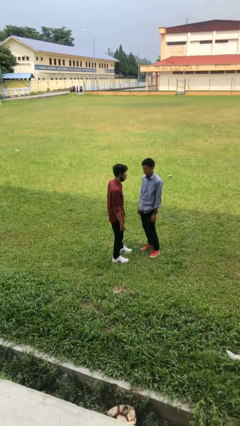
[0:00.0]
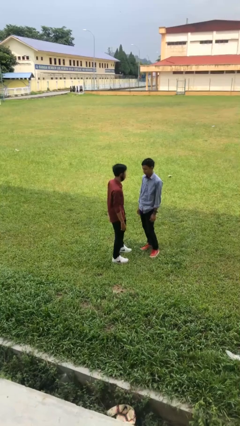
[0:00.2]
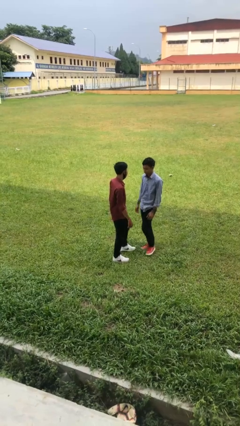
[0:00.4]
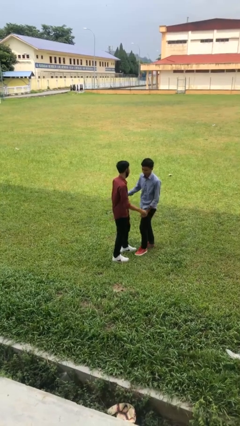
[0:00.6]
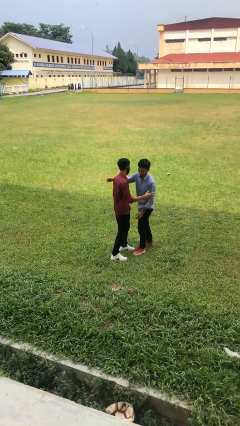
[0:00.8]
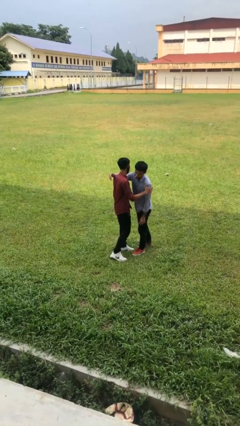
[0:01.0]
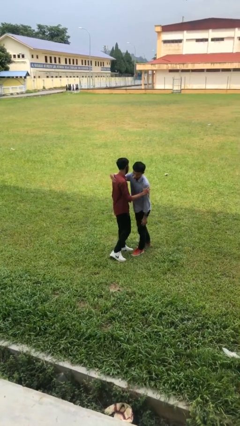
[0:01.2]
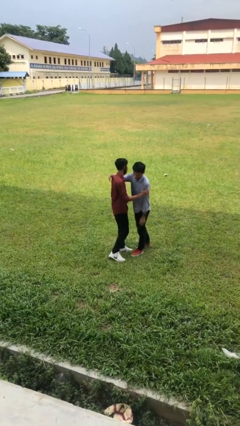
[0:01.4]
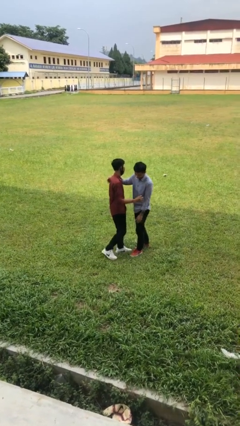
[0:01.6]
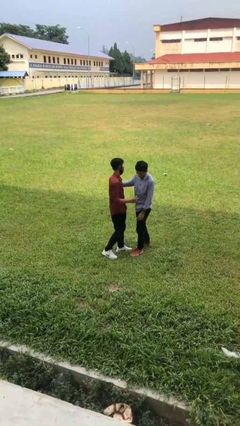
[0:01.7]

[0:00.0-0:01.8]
person embraces person

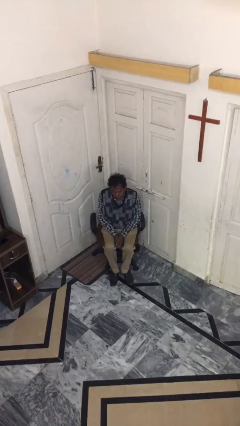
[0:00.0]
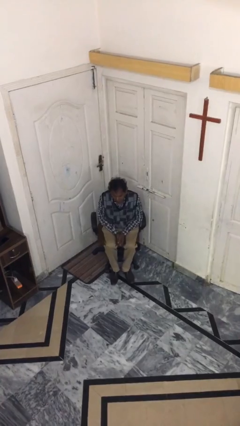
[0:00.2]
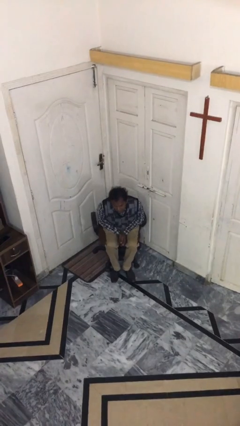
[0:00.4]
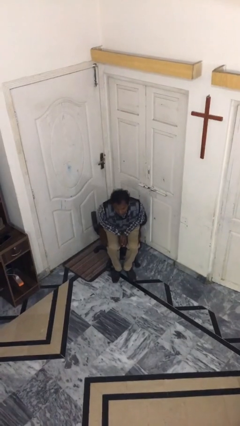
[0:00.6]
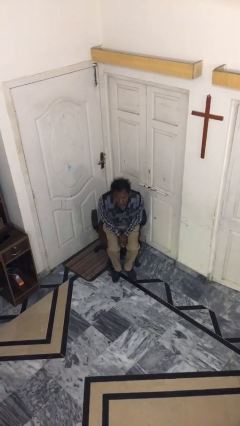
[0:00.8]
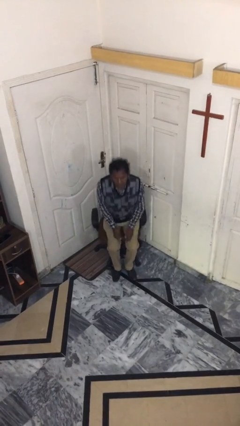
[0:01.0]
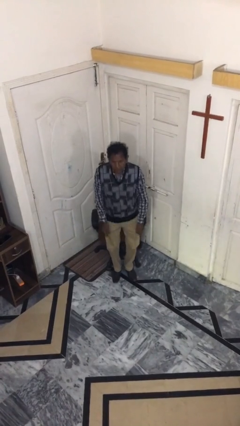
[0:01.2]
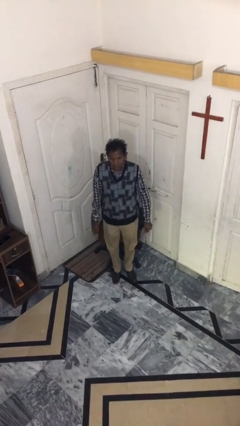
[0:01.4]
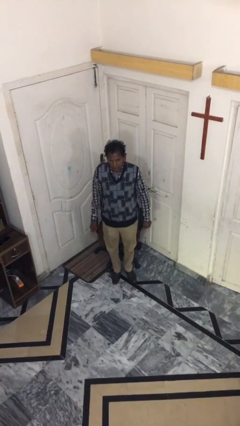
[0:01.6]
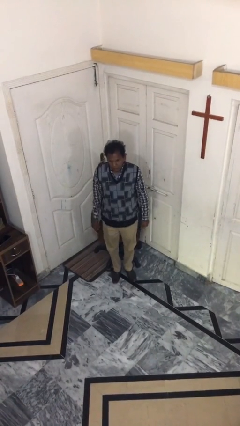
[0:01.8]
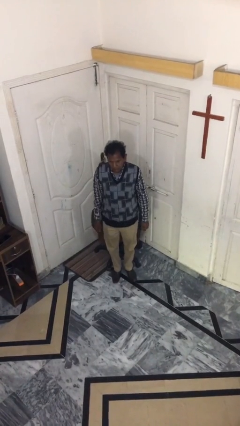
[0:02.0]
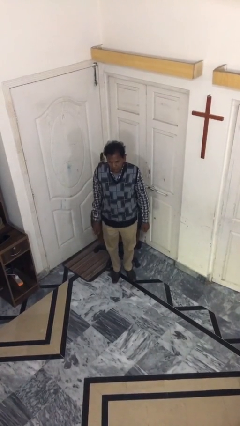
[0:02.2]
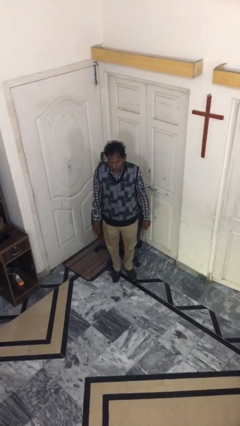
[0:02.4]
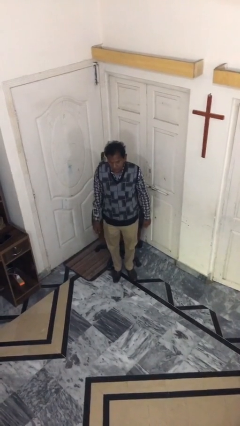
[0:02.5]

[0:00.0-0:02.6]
person stands up

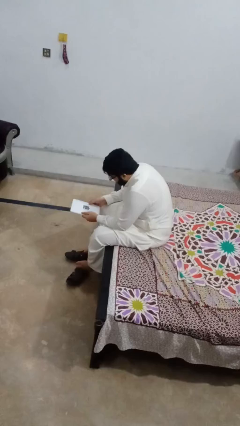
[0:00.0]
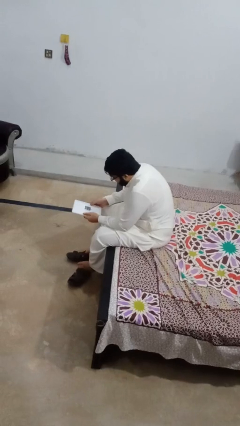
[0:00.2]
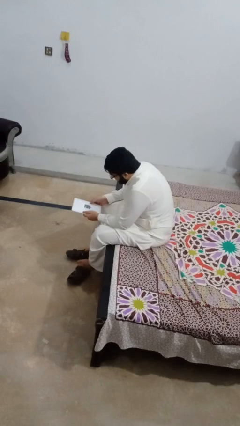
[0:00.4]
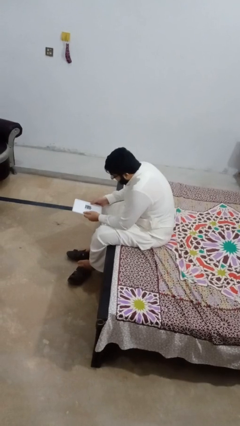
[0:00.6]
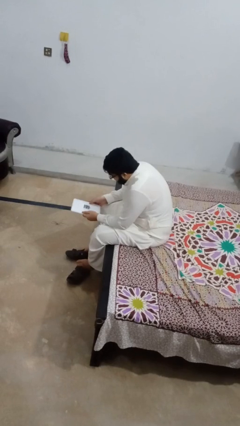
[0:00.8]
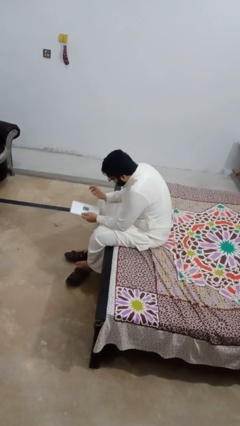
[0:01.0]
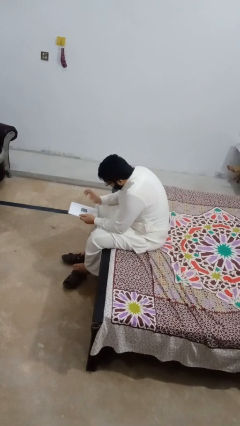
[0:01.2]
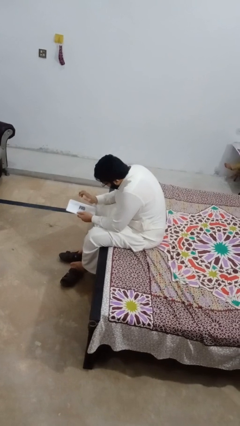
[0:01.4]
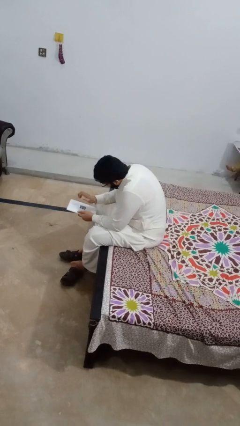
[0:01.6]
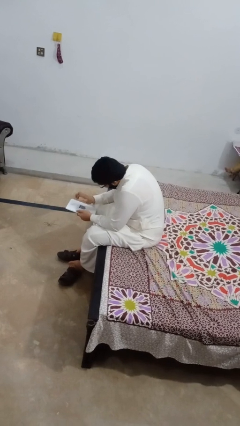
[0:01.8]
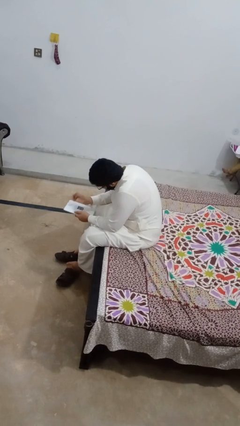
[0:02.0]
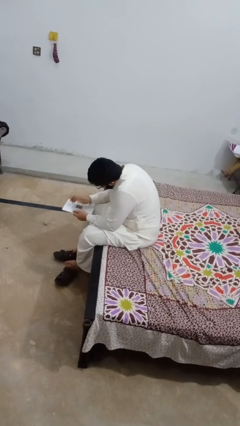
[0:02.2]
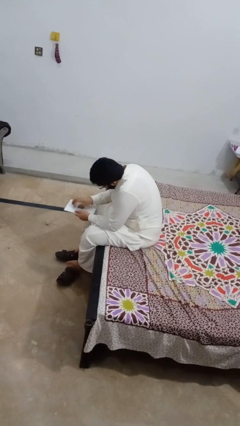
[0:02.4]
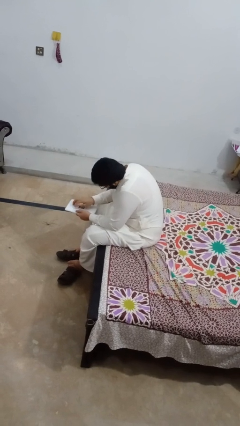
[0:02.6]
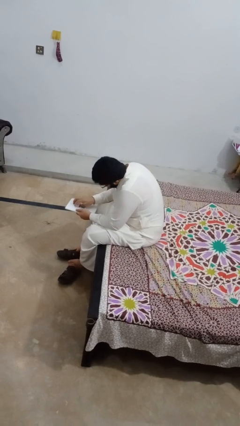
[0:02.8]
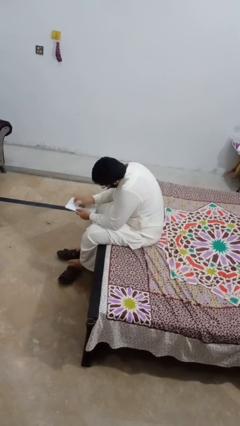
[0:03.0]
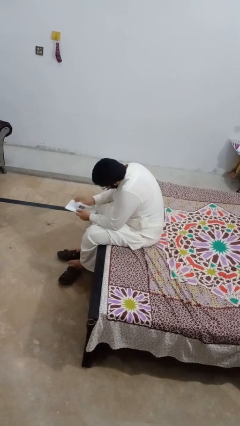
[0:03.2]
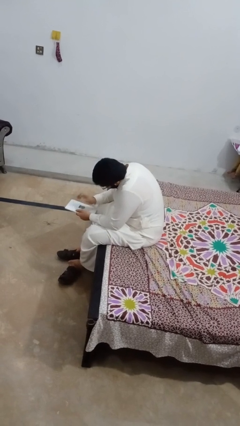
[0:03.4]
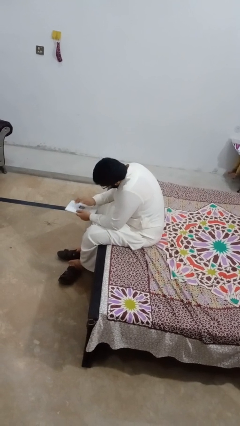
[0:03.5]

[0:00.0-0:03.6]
person taps object with finger

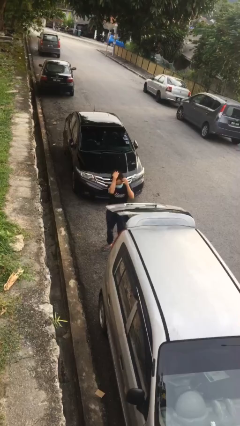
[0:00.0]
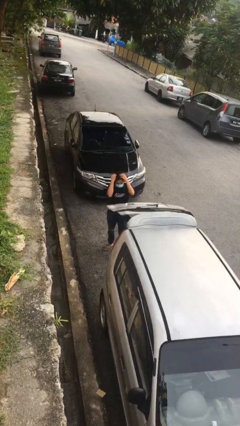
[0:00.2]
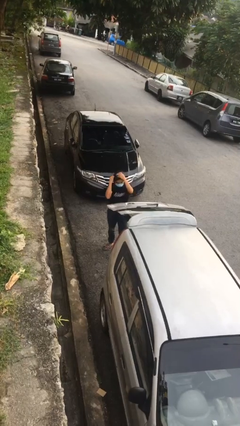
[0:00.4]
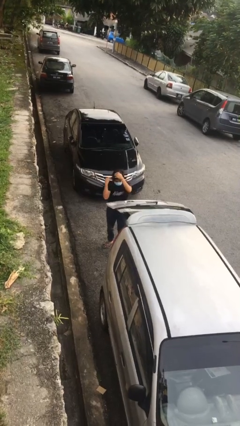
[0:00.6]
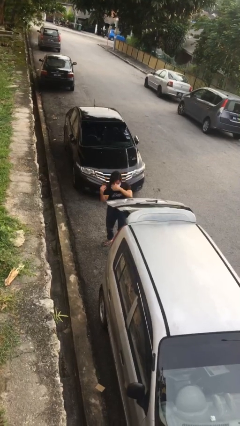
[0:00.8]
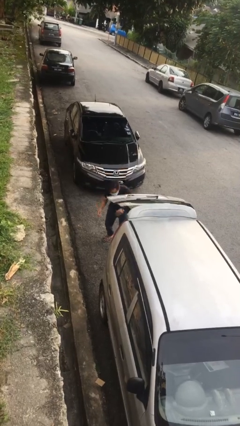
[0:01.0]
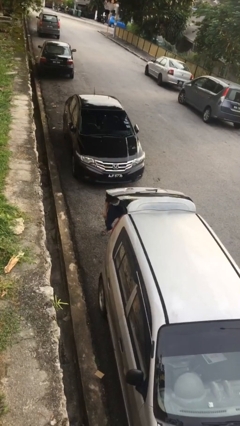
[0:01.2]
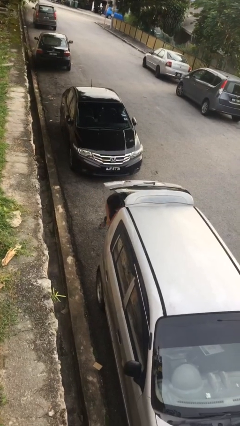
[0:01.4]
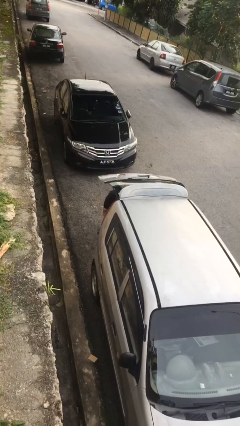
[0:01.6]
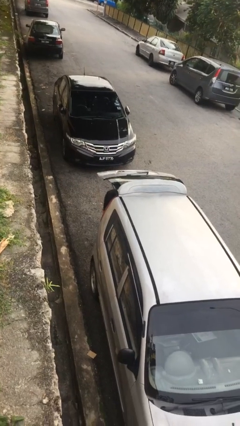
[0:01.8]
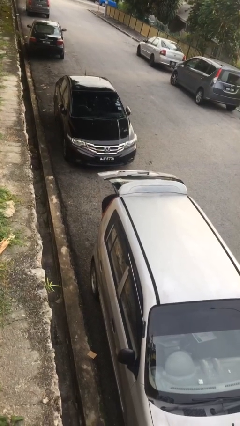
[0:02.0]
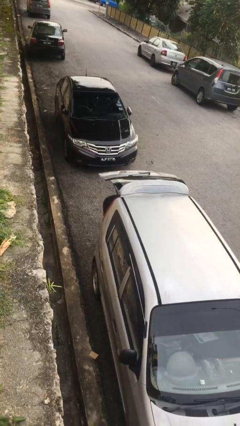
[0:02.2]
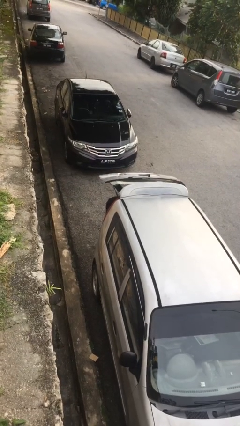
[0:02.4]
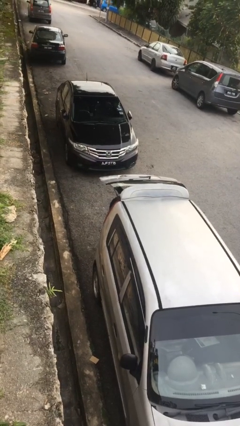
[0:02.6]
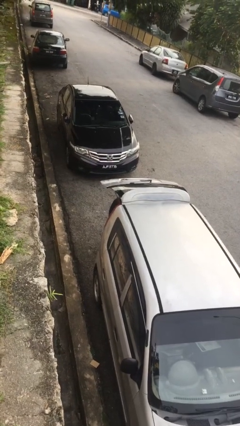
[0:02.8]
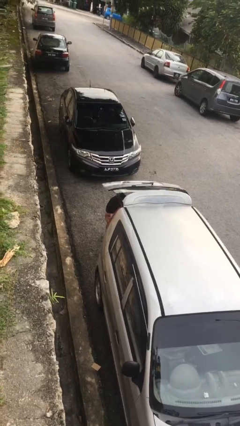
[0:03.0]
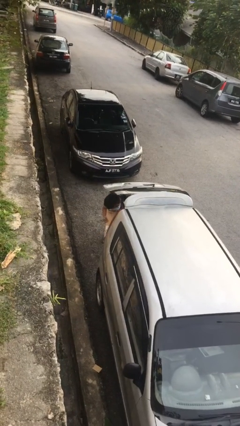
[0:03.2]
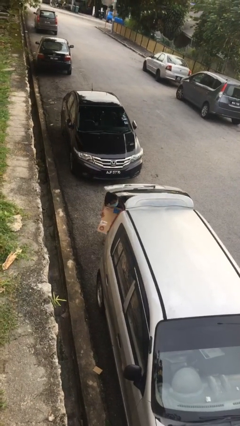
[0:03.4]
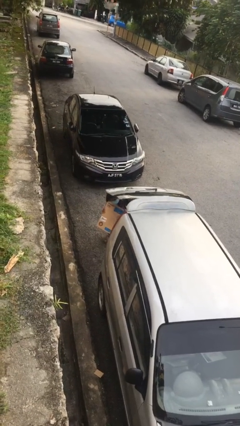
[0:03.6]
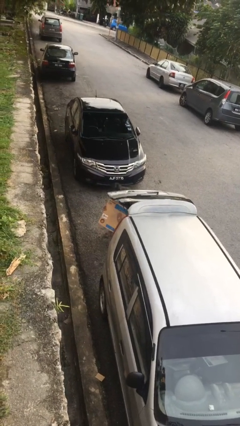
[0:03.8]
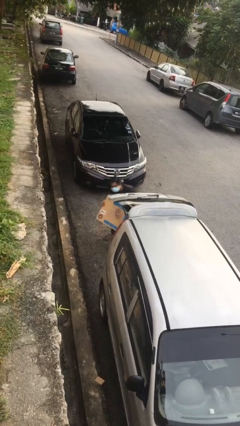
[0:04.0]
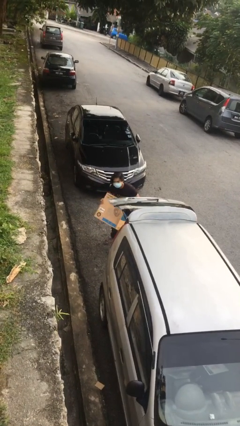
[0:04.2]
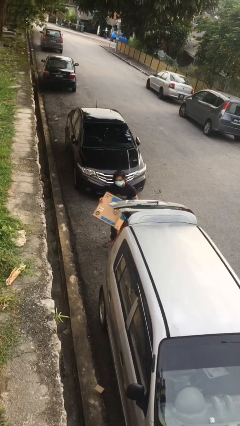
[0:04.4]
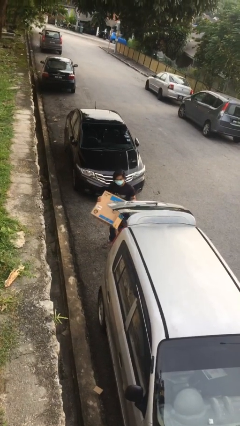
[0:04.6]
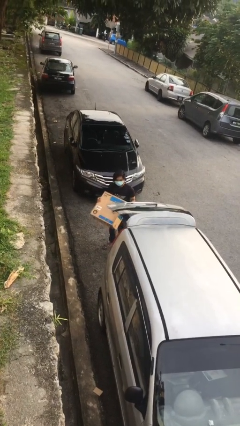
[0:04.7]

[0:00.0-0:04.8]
person unloads car

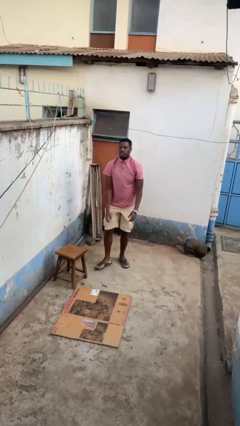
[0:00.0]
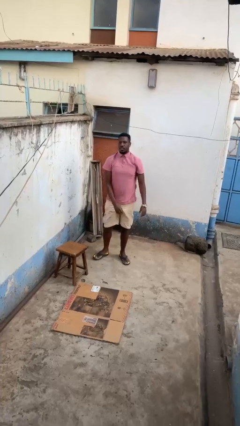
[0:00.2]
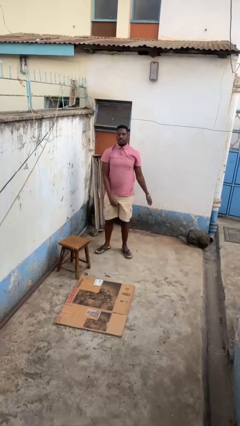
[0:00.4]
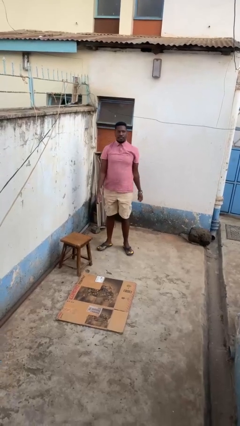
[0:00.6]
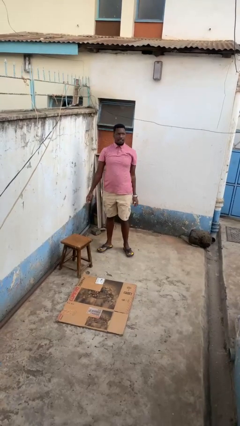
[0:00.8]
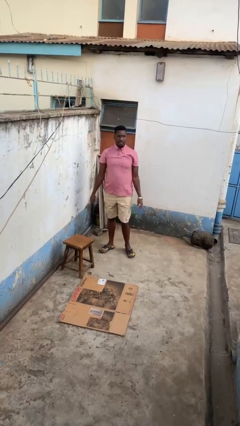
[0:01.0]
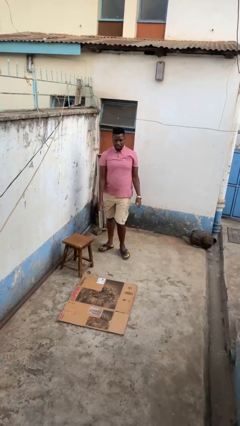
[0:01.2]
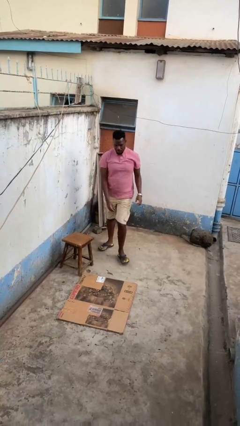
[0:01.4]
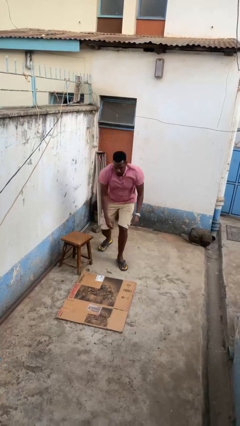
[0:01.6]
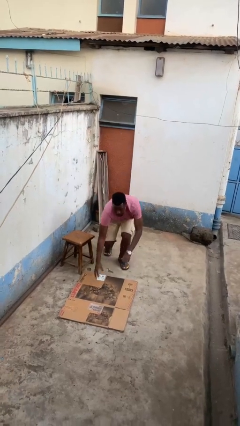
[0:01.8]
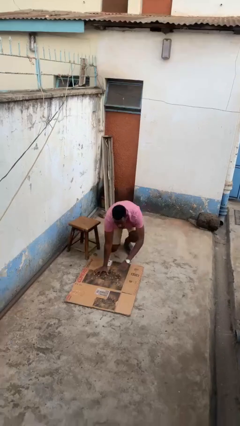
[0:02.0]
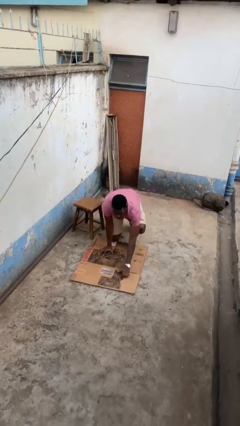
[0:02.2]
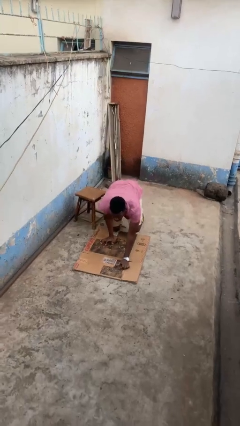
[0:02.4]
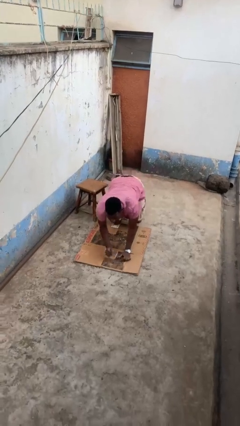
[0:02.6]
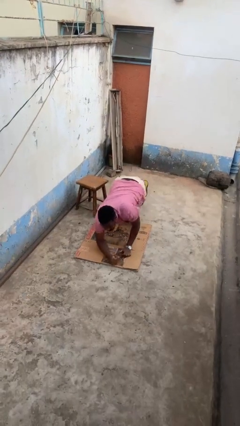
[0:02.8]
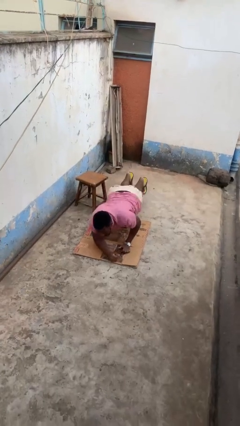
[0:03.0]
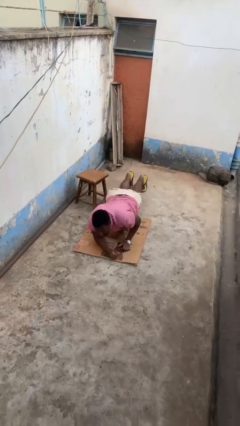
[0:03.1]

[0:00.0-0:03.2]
person trips on object on floor

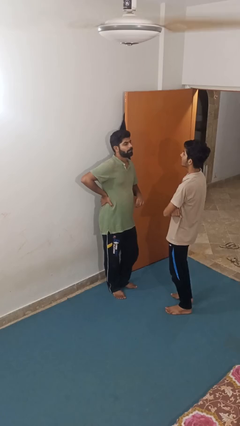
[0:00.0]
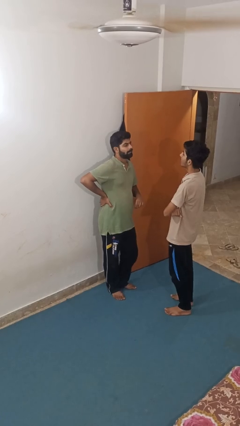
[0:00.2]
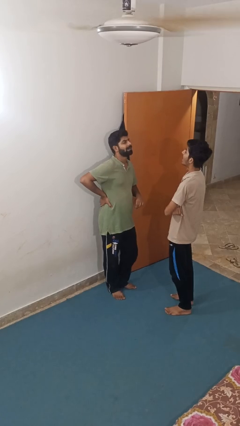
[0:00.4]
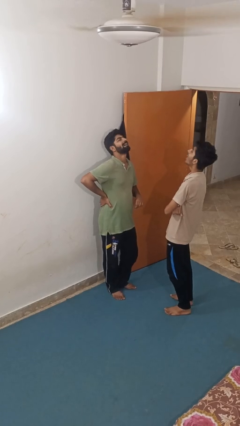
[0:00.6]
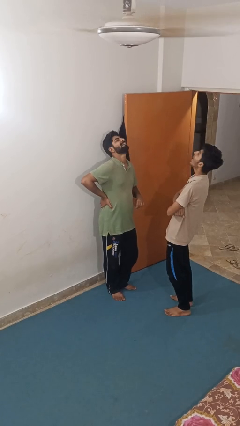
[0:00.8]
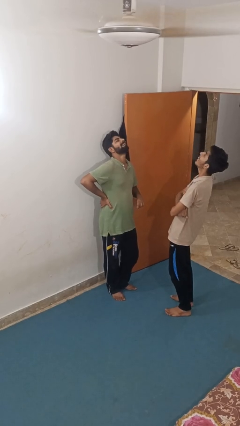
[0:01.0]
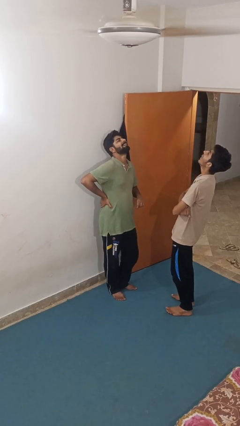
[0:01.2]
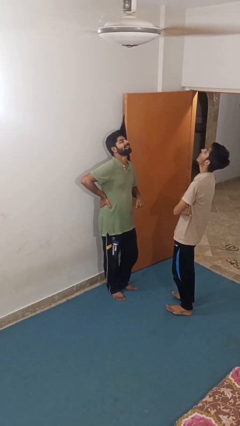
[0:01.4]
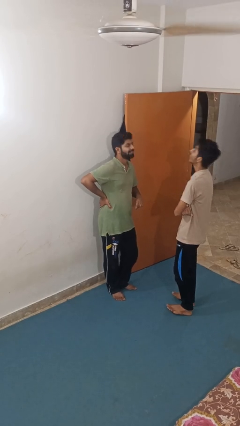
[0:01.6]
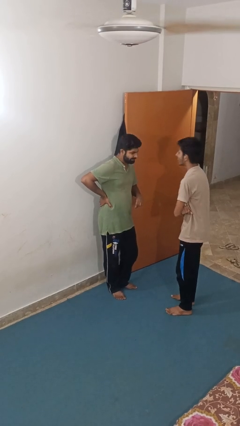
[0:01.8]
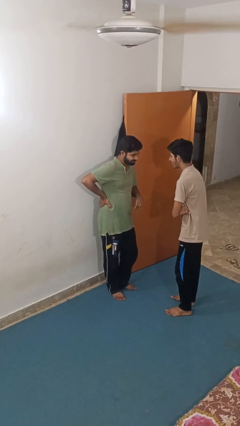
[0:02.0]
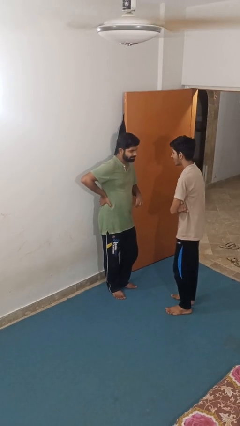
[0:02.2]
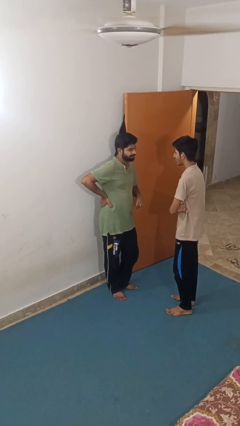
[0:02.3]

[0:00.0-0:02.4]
person laughs with person
